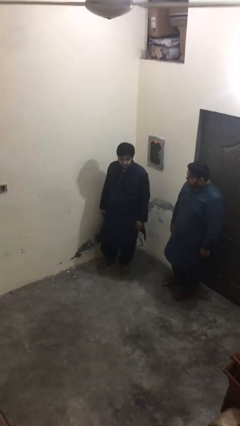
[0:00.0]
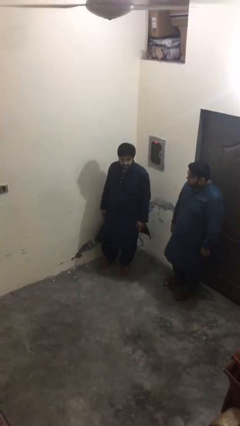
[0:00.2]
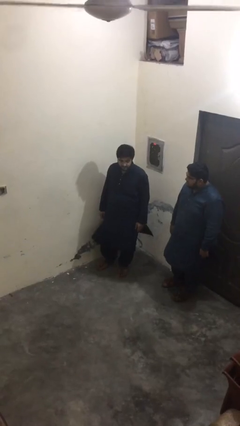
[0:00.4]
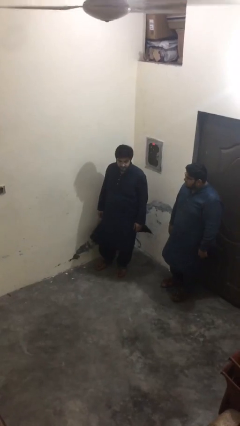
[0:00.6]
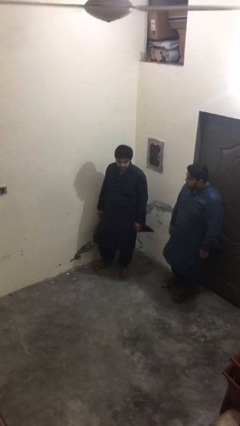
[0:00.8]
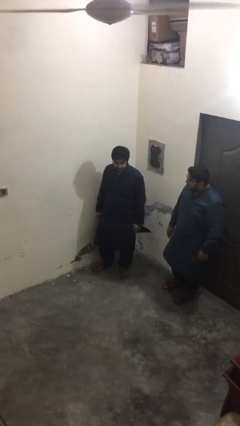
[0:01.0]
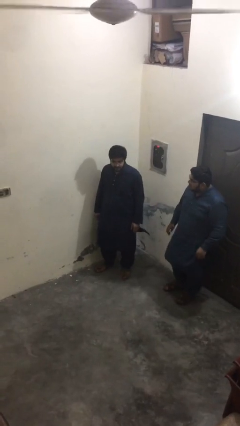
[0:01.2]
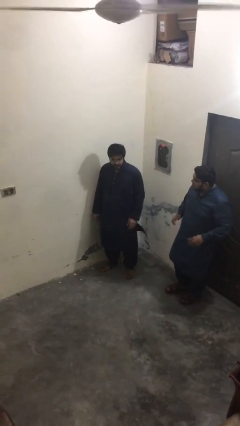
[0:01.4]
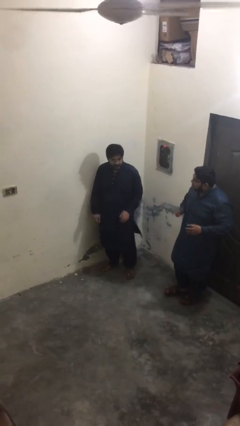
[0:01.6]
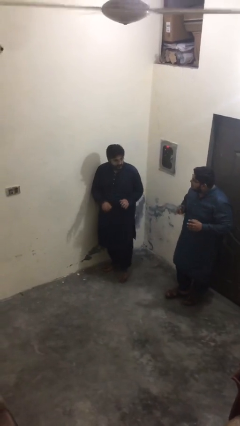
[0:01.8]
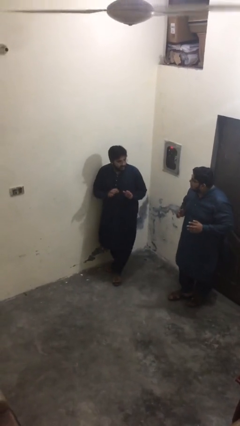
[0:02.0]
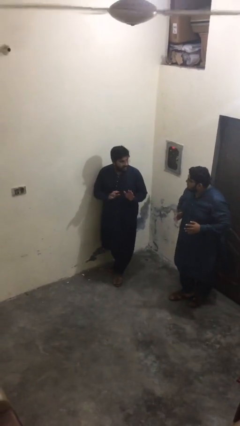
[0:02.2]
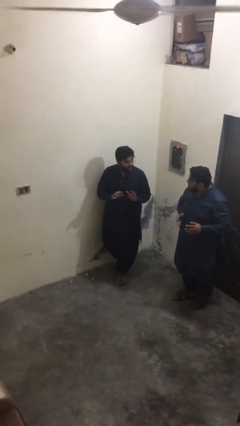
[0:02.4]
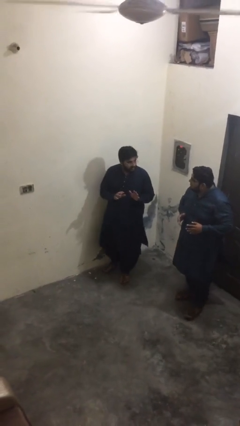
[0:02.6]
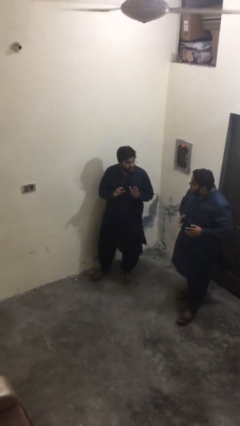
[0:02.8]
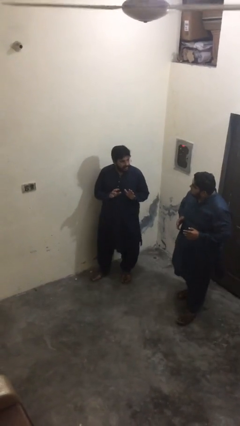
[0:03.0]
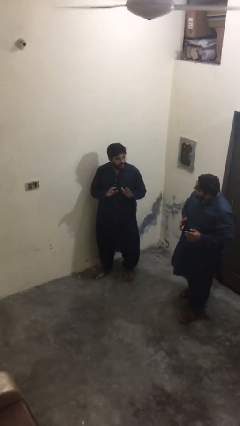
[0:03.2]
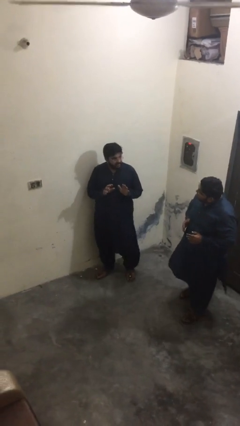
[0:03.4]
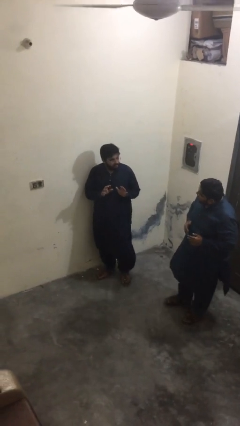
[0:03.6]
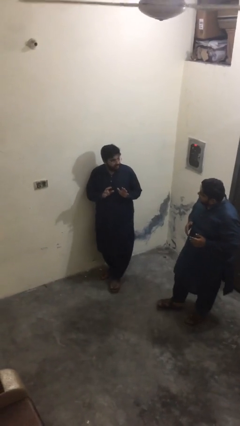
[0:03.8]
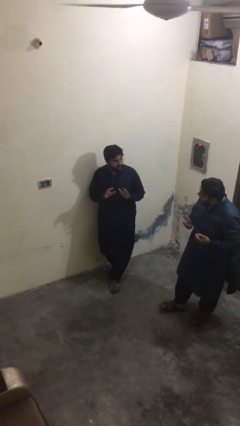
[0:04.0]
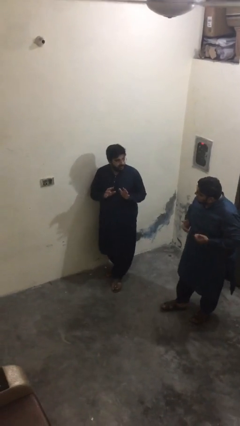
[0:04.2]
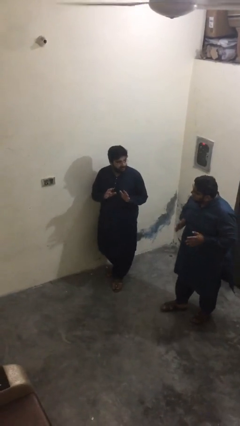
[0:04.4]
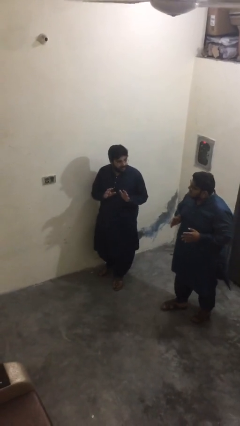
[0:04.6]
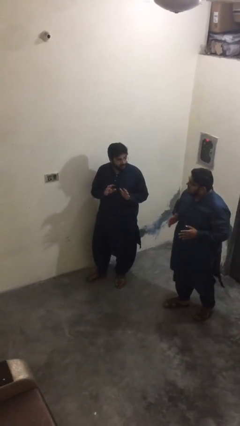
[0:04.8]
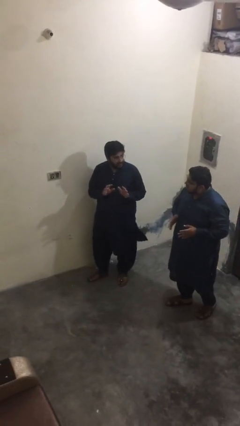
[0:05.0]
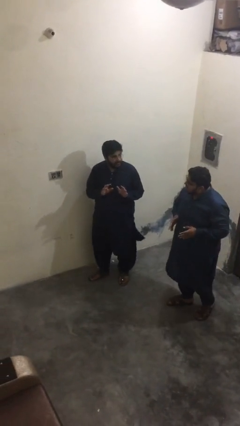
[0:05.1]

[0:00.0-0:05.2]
person talks to person

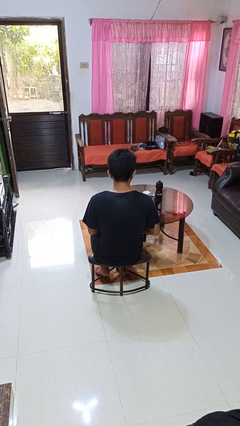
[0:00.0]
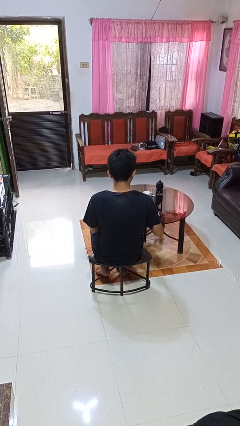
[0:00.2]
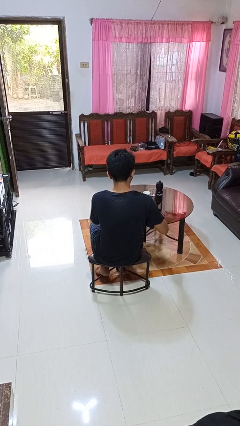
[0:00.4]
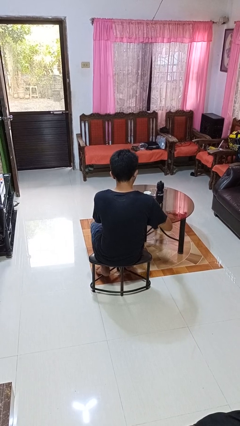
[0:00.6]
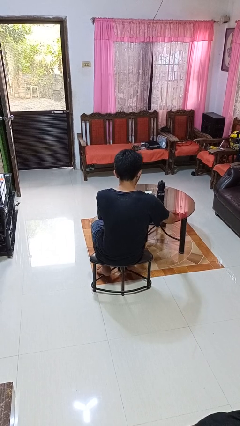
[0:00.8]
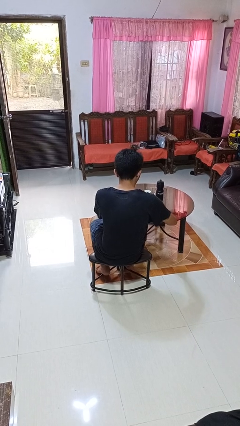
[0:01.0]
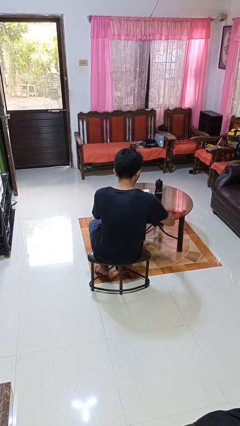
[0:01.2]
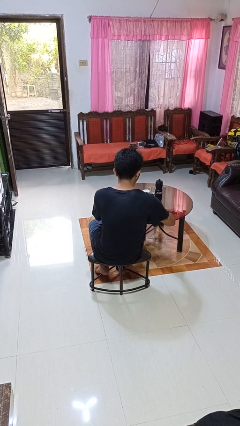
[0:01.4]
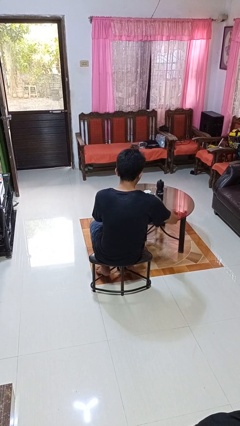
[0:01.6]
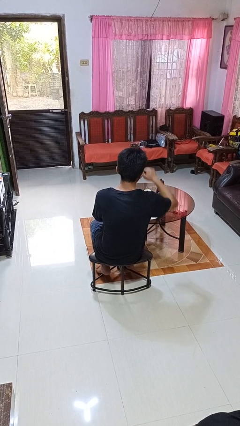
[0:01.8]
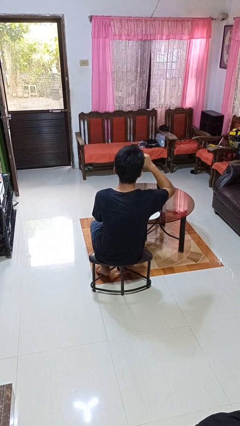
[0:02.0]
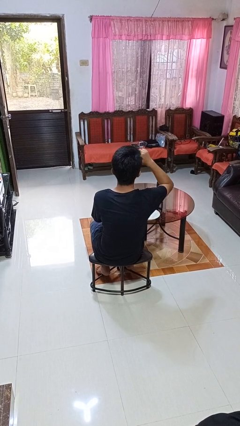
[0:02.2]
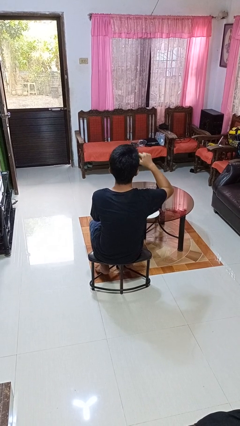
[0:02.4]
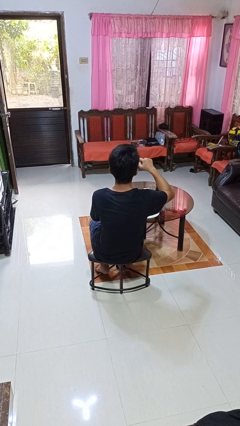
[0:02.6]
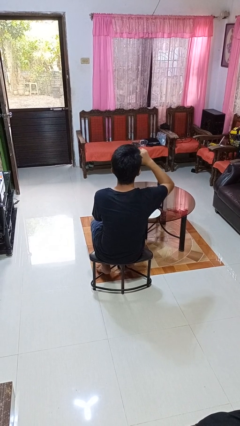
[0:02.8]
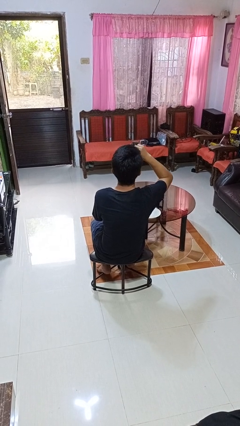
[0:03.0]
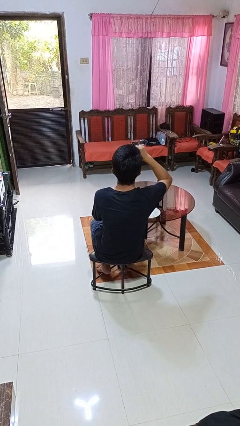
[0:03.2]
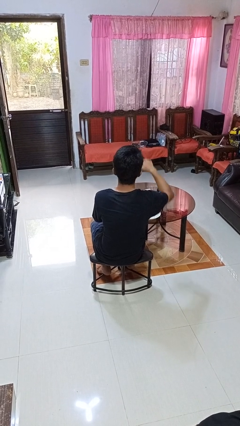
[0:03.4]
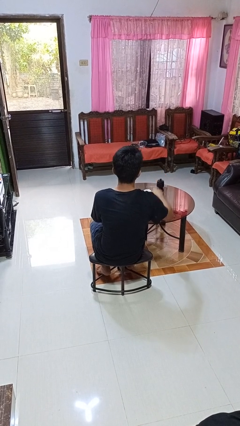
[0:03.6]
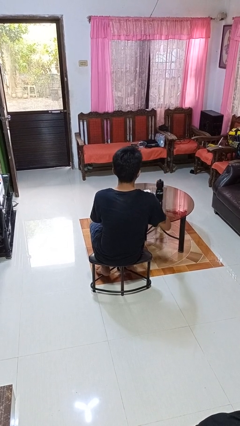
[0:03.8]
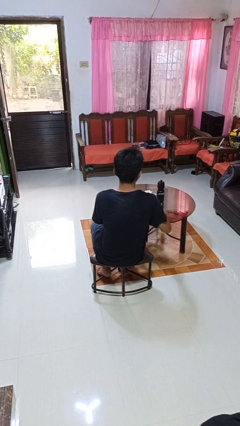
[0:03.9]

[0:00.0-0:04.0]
person eats with utensil

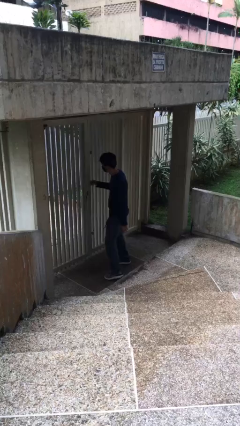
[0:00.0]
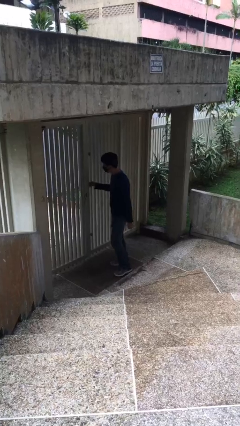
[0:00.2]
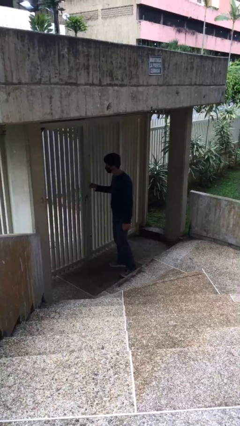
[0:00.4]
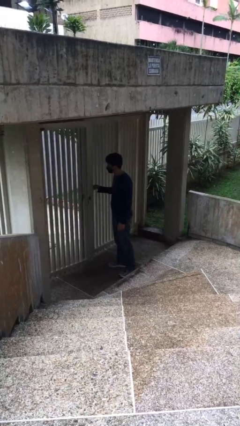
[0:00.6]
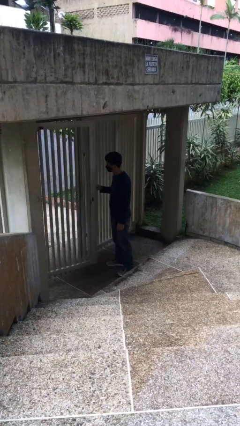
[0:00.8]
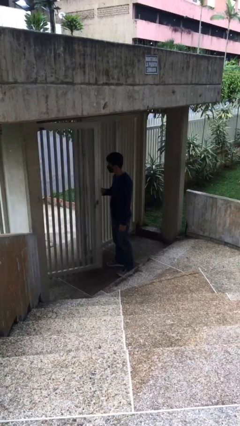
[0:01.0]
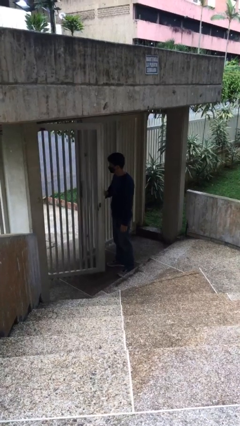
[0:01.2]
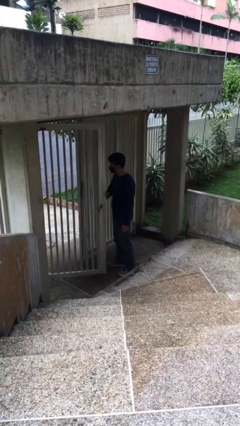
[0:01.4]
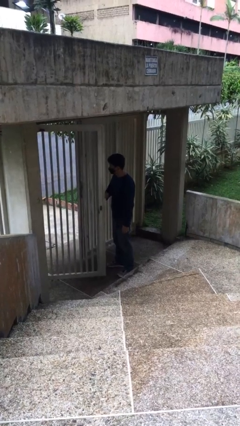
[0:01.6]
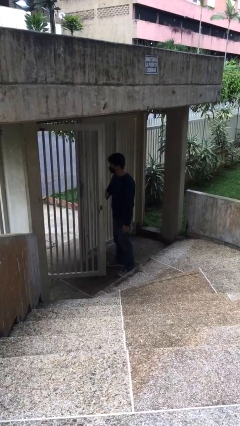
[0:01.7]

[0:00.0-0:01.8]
person opens facility door

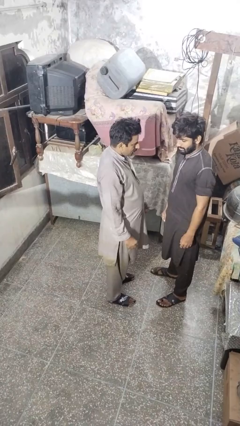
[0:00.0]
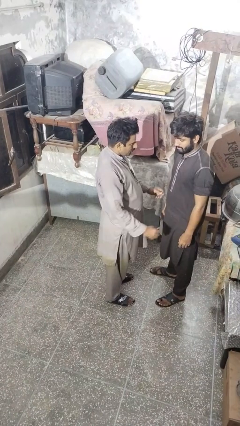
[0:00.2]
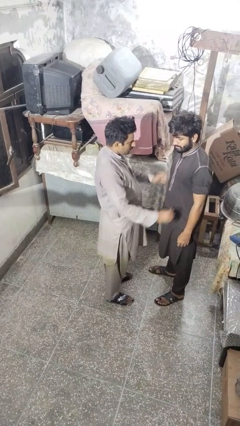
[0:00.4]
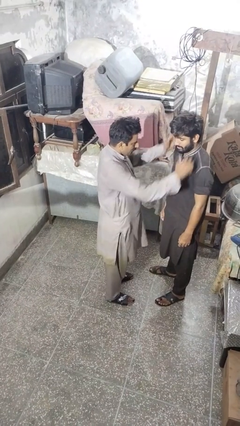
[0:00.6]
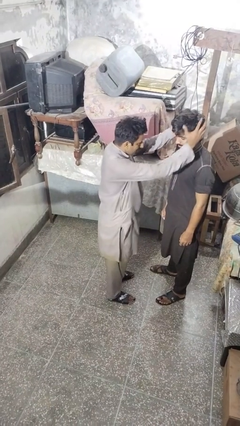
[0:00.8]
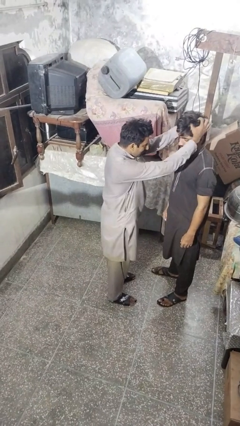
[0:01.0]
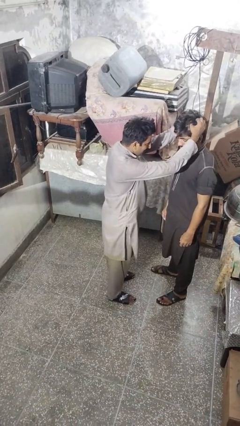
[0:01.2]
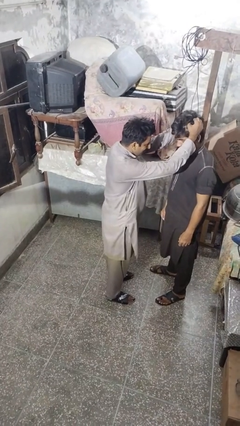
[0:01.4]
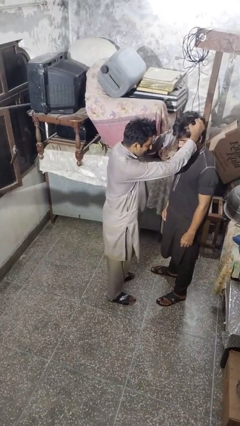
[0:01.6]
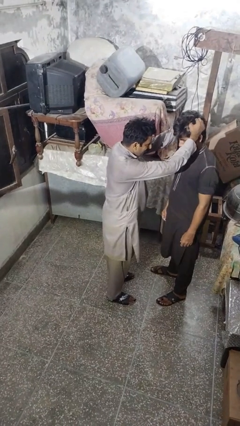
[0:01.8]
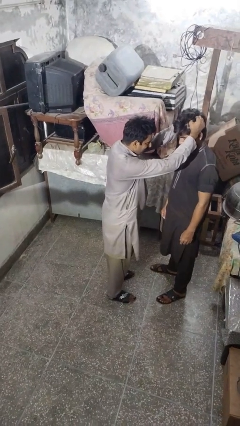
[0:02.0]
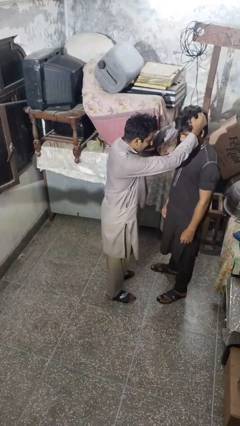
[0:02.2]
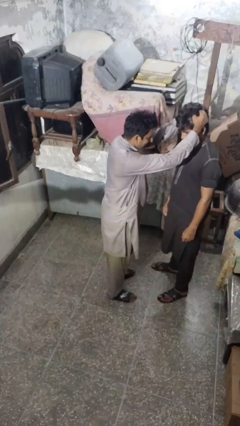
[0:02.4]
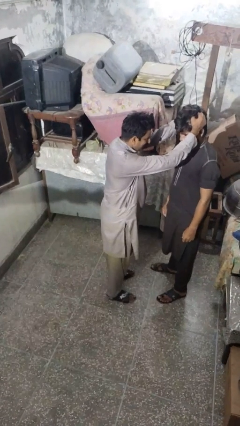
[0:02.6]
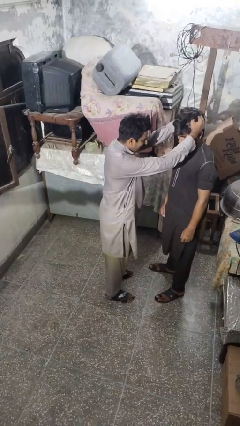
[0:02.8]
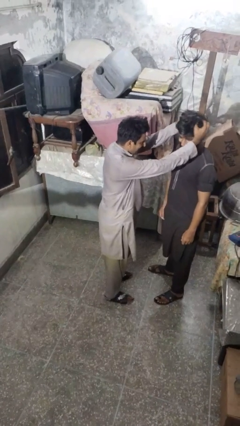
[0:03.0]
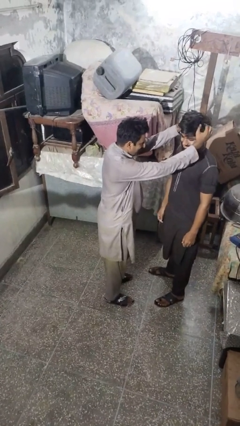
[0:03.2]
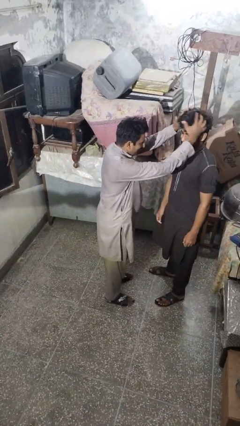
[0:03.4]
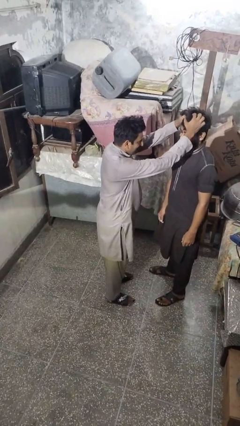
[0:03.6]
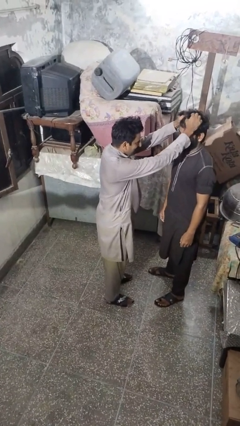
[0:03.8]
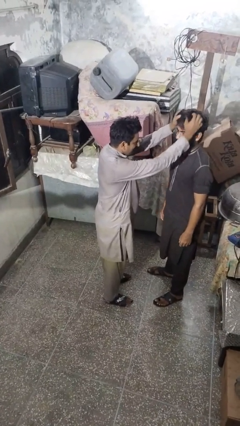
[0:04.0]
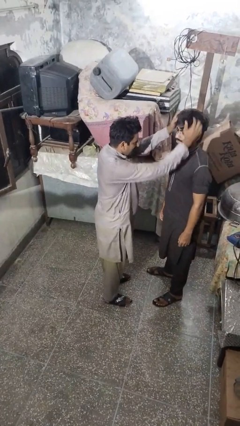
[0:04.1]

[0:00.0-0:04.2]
person grabs person by hair

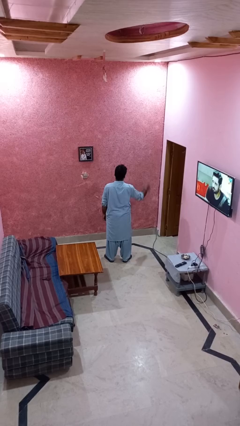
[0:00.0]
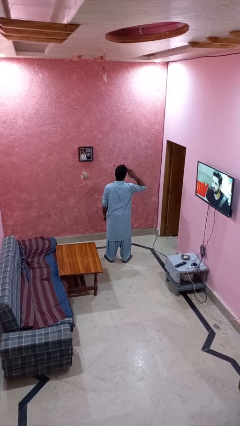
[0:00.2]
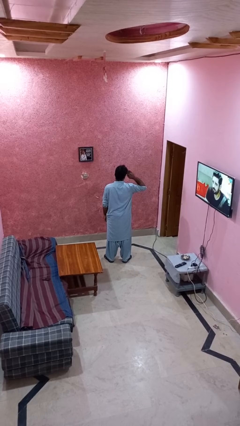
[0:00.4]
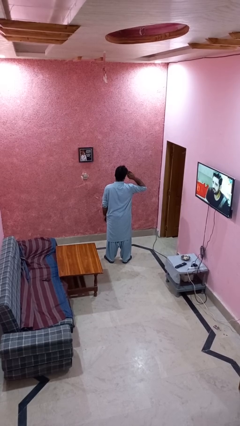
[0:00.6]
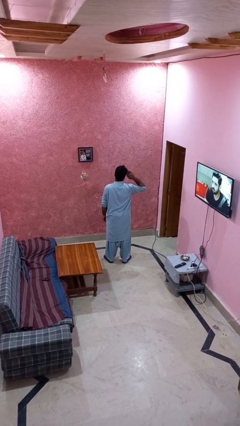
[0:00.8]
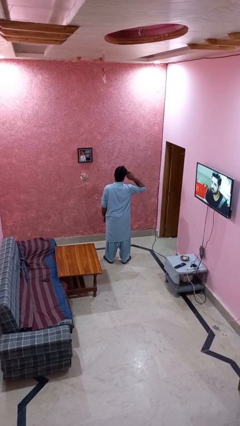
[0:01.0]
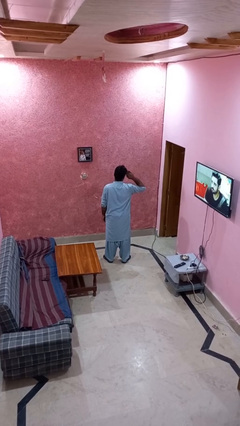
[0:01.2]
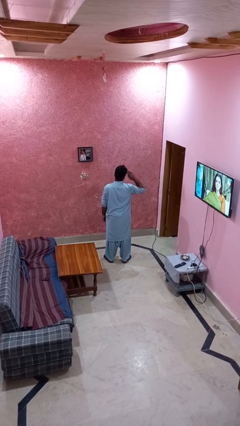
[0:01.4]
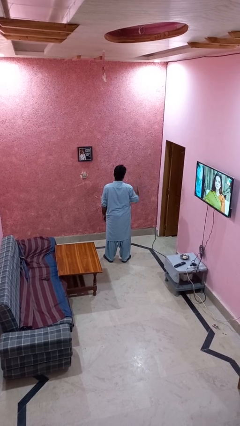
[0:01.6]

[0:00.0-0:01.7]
person salutes

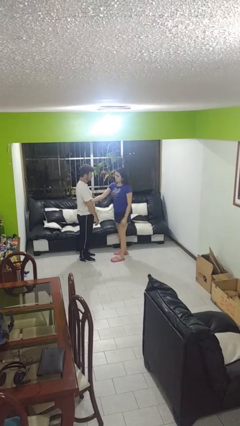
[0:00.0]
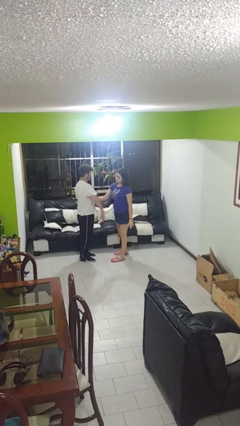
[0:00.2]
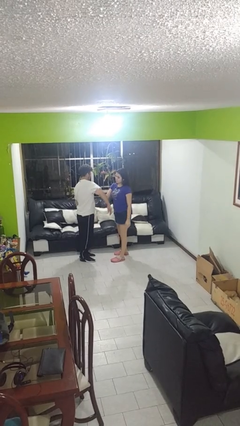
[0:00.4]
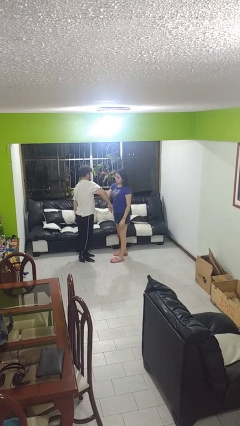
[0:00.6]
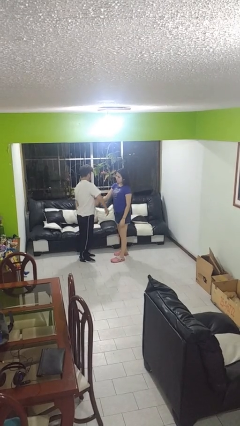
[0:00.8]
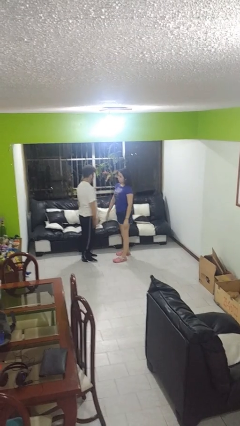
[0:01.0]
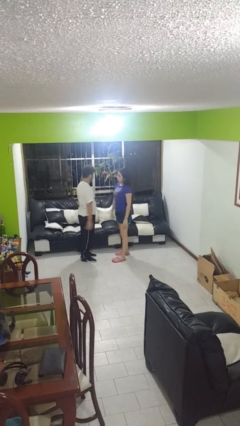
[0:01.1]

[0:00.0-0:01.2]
person grabs person by bicep
